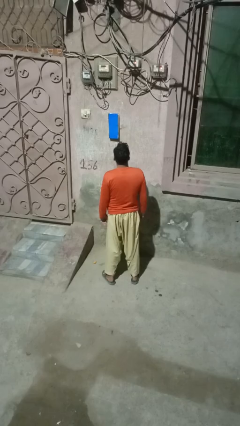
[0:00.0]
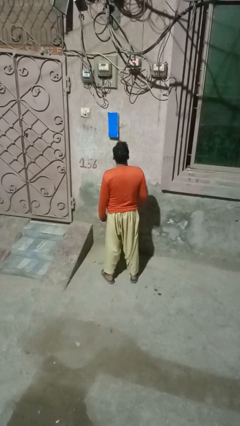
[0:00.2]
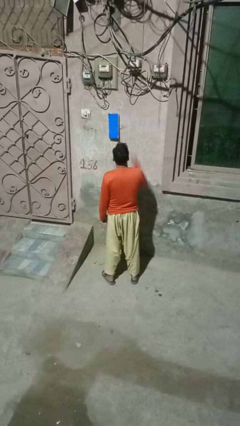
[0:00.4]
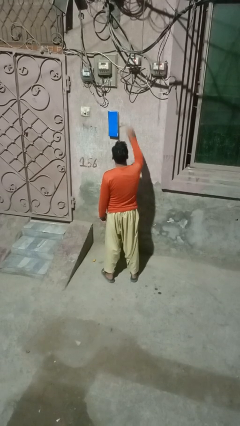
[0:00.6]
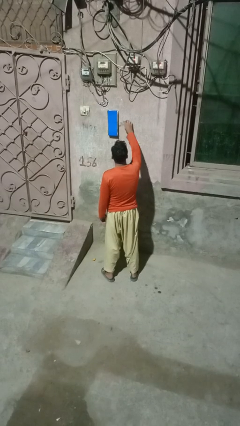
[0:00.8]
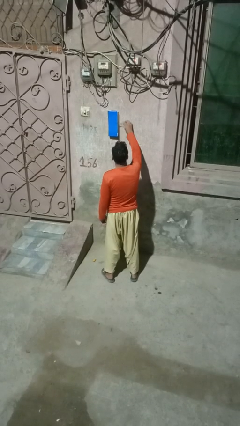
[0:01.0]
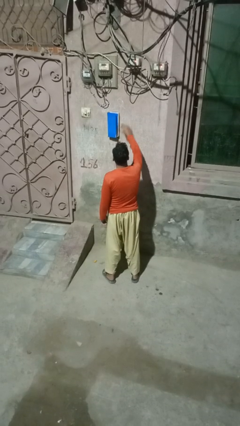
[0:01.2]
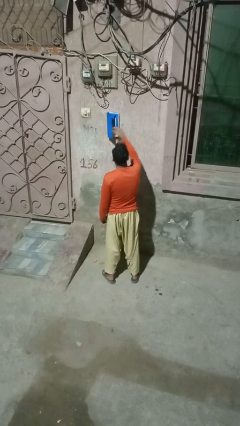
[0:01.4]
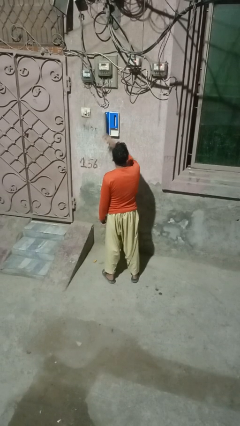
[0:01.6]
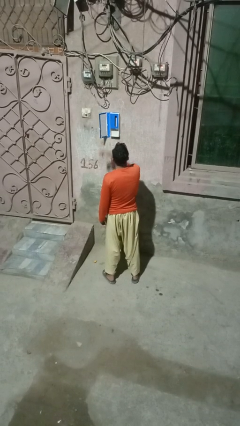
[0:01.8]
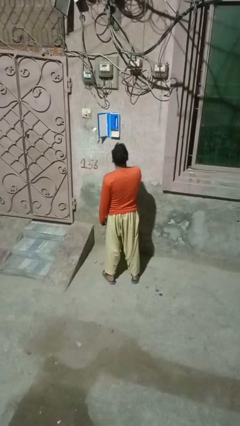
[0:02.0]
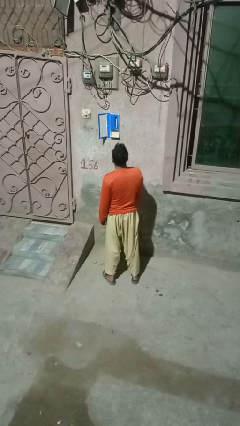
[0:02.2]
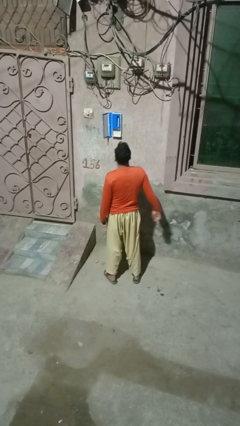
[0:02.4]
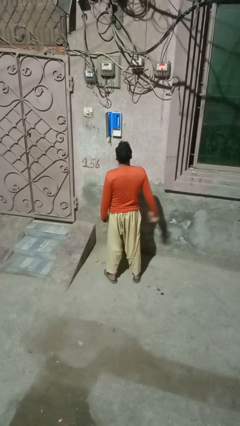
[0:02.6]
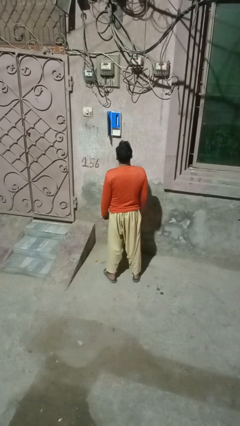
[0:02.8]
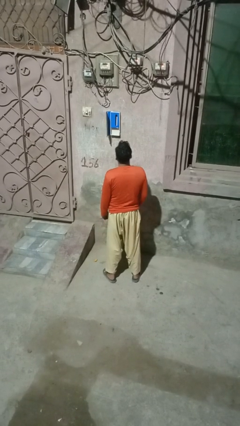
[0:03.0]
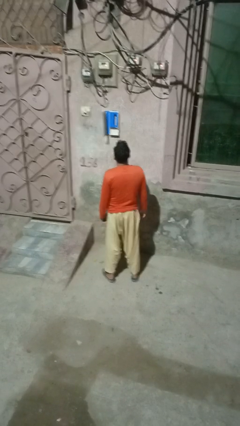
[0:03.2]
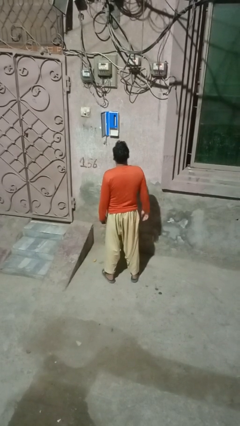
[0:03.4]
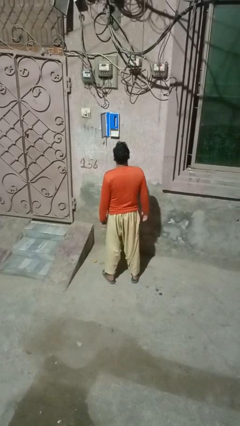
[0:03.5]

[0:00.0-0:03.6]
person opens mailbox

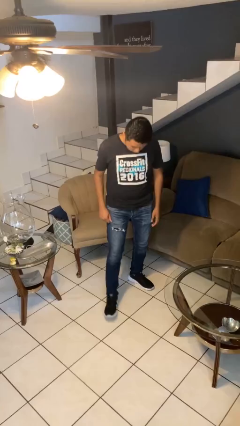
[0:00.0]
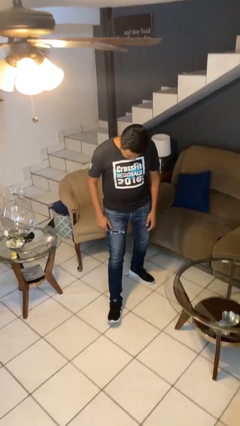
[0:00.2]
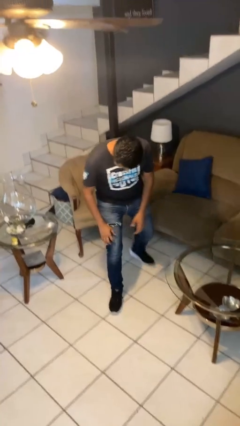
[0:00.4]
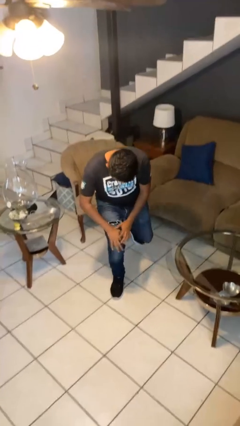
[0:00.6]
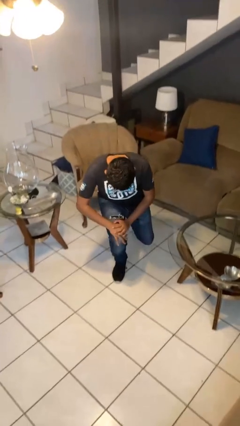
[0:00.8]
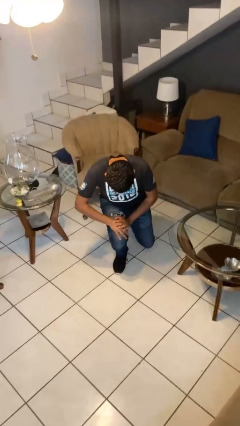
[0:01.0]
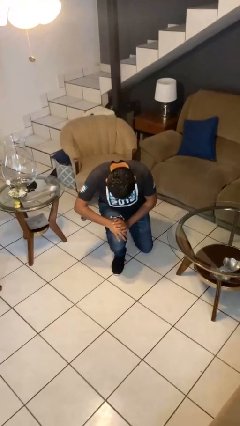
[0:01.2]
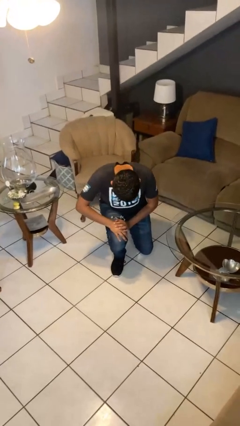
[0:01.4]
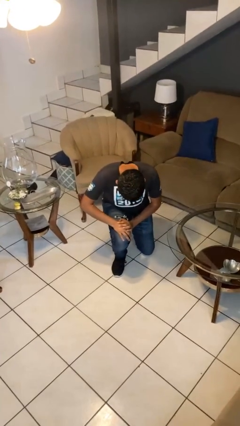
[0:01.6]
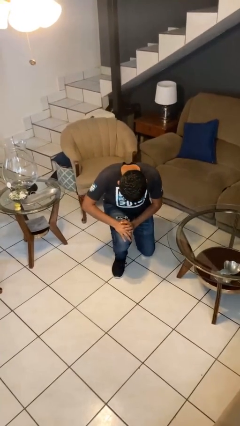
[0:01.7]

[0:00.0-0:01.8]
person kneels

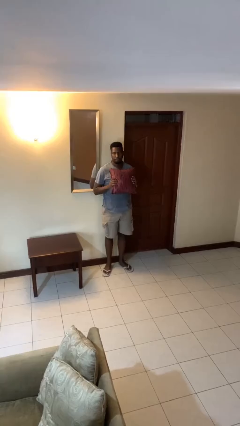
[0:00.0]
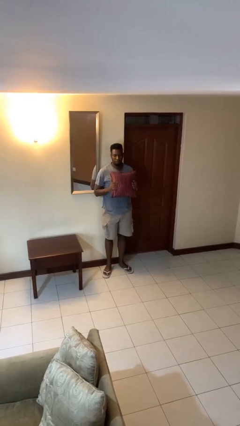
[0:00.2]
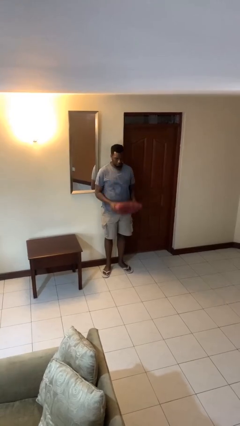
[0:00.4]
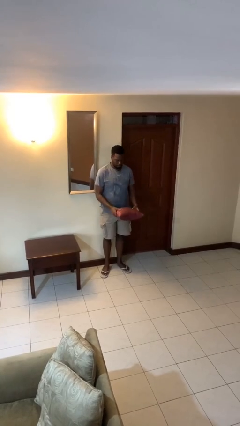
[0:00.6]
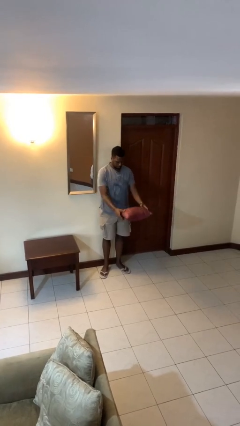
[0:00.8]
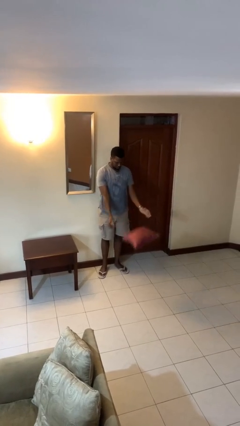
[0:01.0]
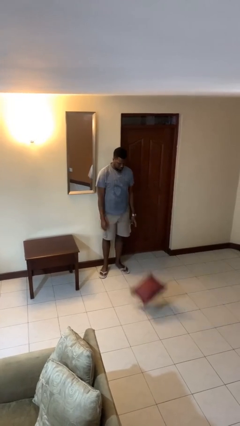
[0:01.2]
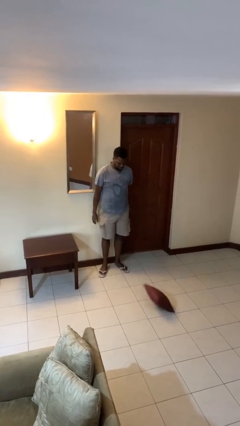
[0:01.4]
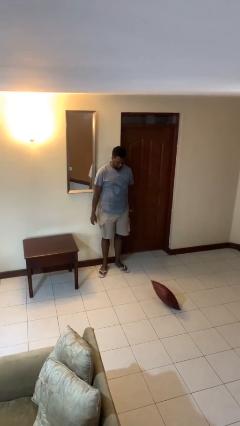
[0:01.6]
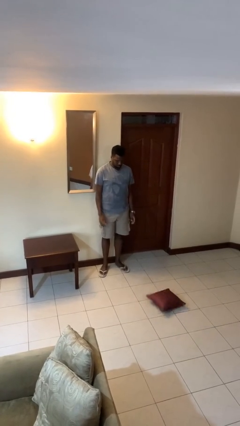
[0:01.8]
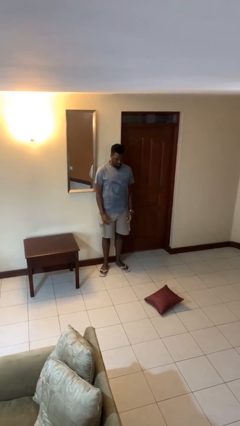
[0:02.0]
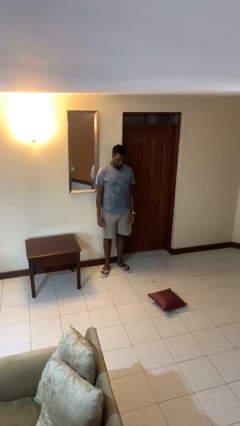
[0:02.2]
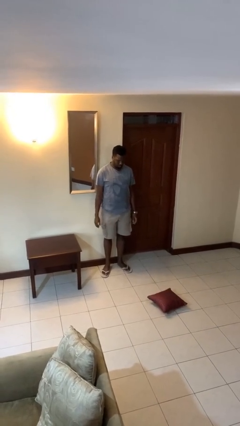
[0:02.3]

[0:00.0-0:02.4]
person throws object to ground

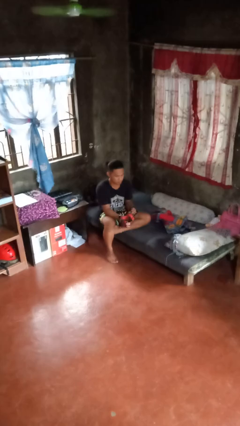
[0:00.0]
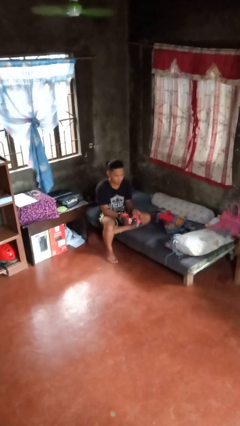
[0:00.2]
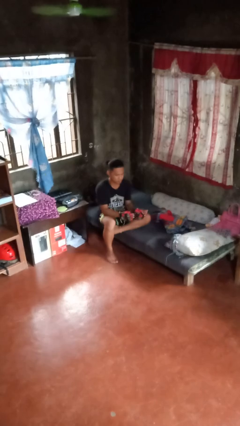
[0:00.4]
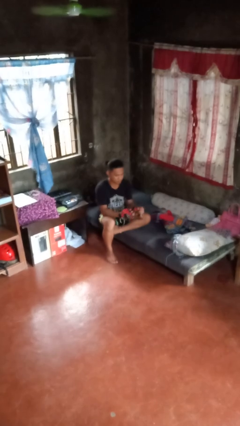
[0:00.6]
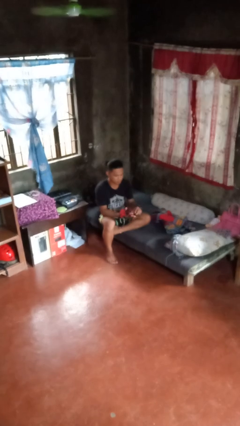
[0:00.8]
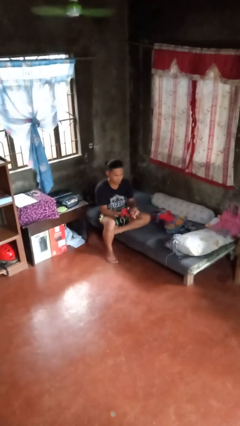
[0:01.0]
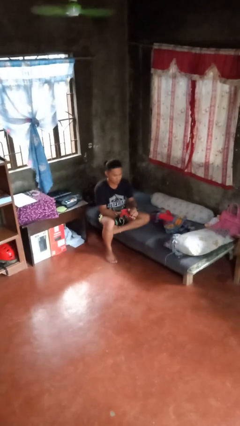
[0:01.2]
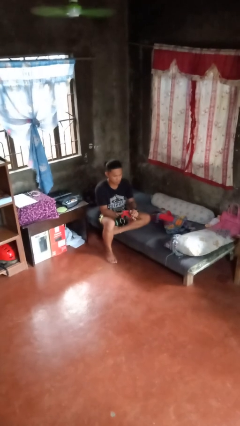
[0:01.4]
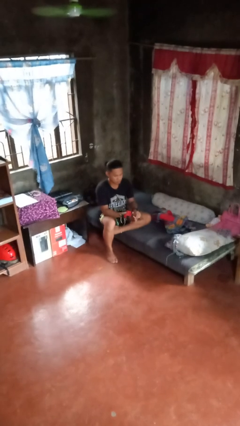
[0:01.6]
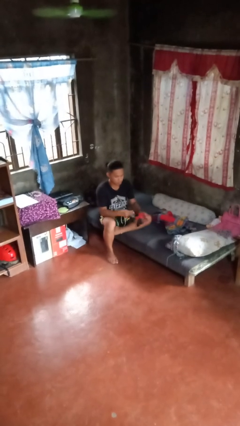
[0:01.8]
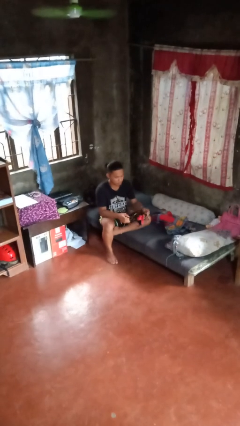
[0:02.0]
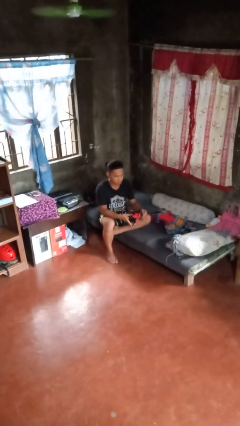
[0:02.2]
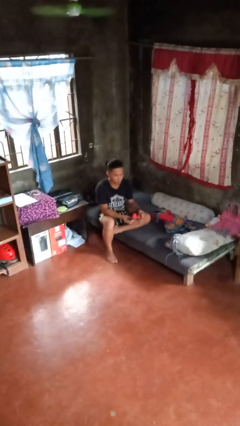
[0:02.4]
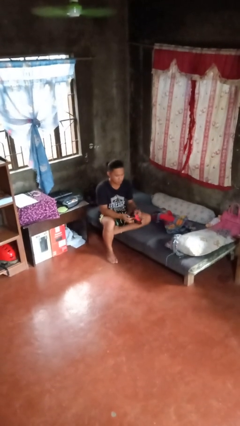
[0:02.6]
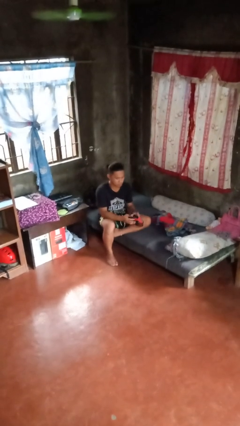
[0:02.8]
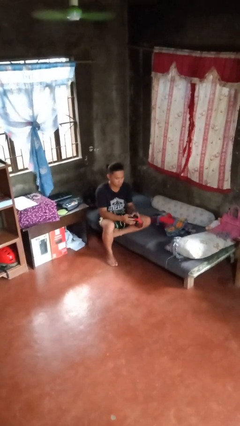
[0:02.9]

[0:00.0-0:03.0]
person takes off gloves

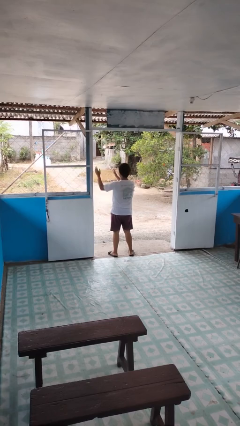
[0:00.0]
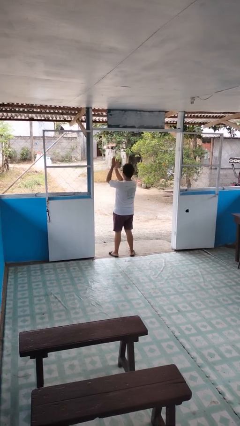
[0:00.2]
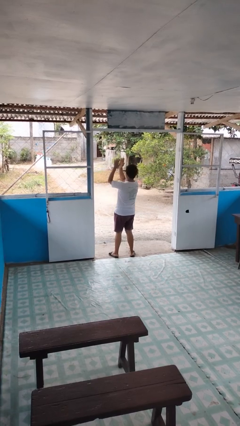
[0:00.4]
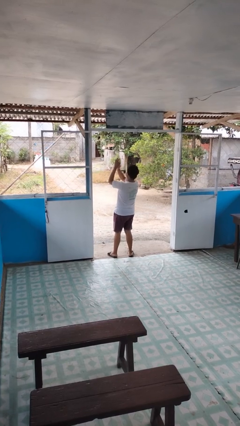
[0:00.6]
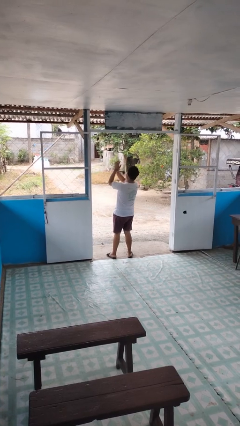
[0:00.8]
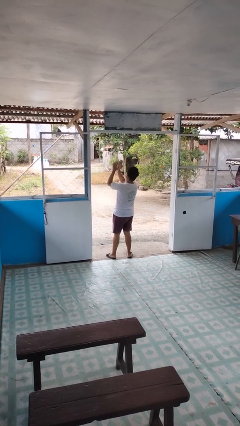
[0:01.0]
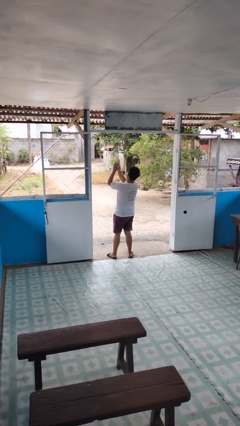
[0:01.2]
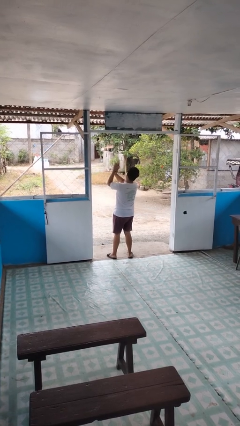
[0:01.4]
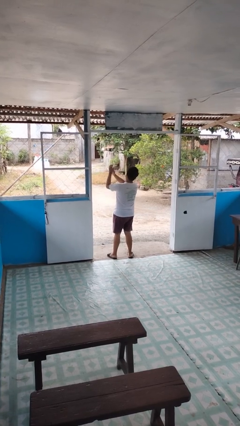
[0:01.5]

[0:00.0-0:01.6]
person claps hands

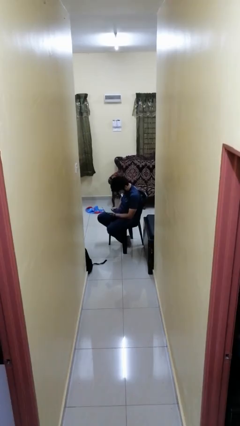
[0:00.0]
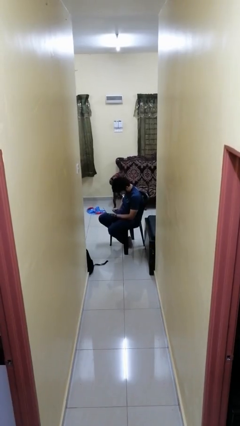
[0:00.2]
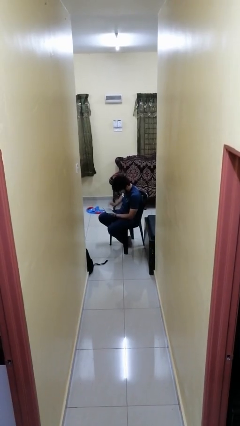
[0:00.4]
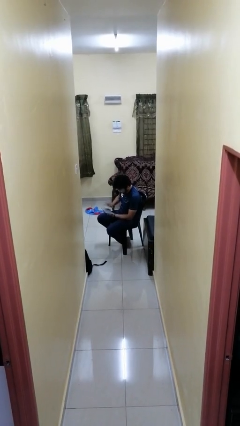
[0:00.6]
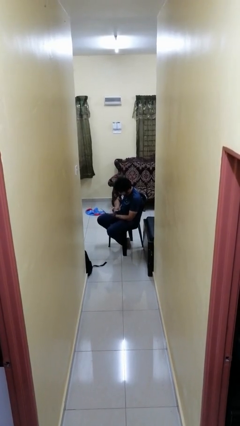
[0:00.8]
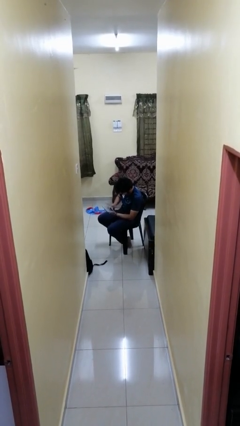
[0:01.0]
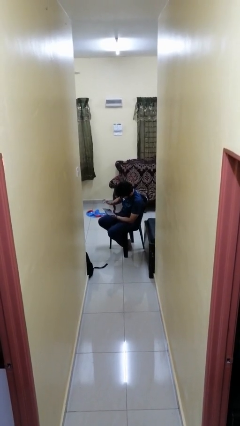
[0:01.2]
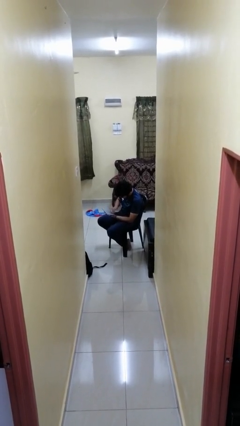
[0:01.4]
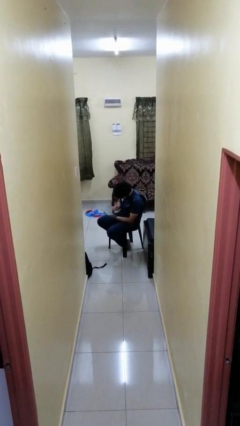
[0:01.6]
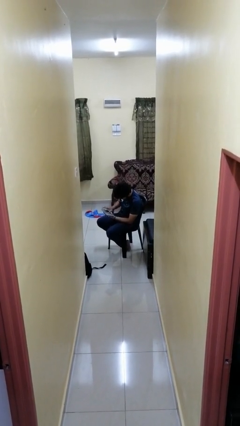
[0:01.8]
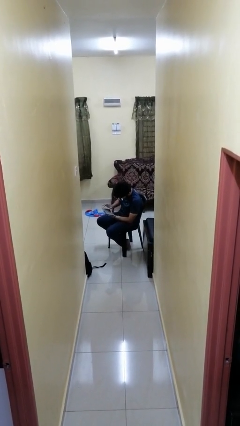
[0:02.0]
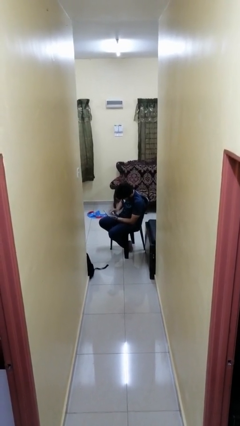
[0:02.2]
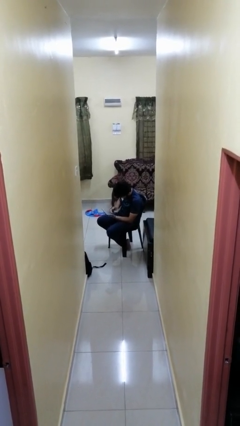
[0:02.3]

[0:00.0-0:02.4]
person interacts with tablet

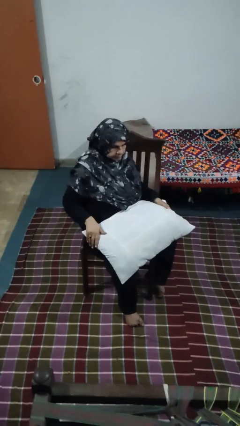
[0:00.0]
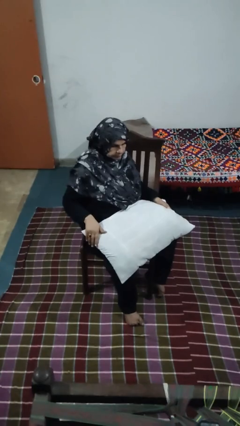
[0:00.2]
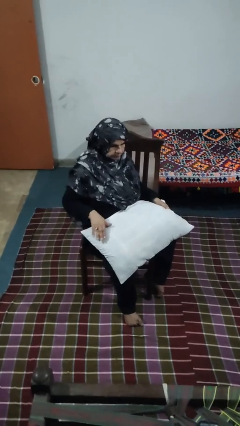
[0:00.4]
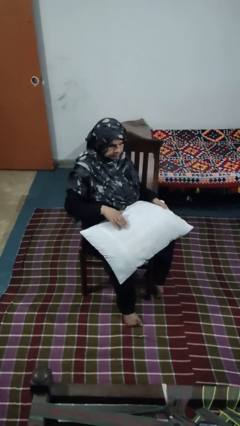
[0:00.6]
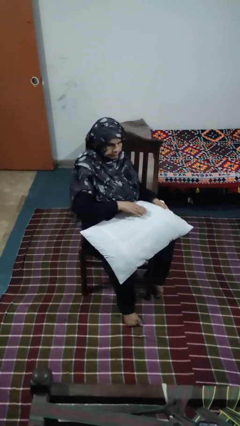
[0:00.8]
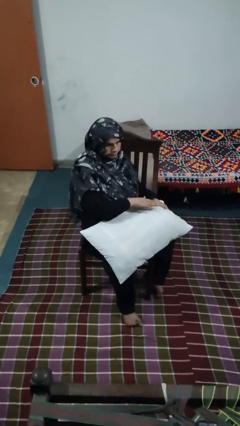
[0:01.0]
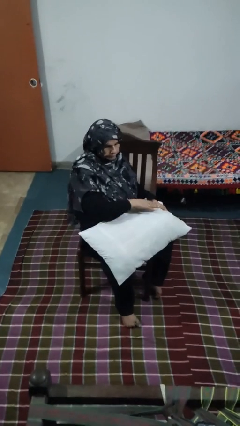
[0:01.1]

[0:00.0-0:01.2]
person waves hand over object

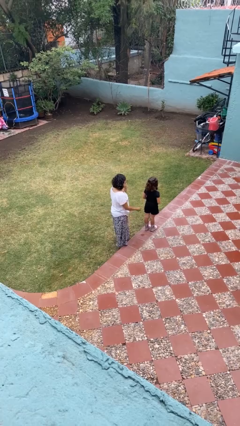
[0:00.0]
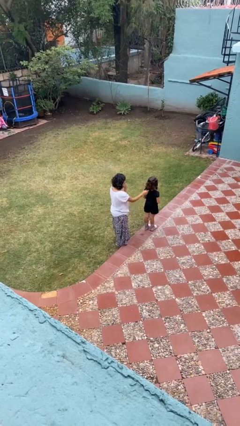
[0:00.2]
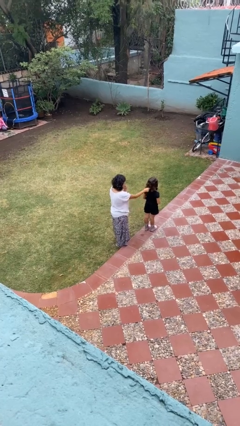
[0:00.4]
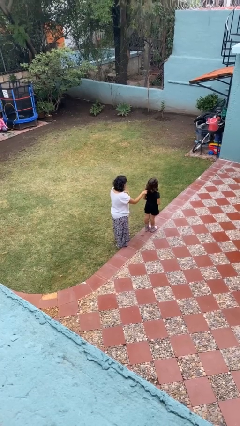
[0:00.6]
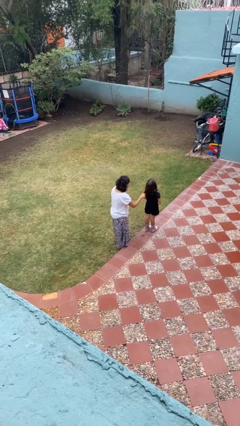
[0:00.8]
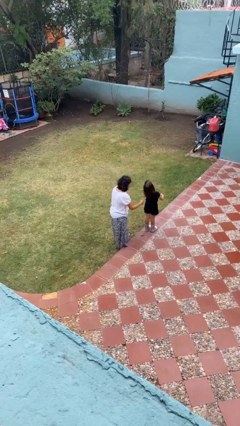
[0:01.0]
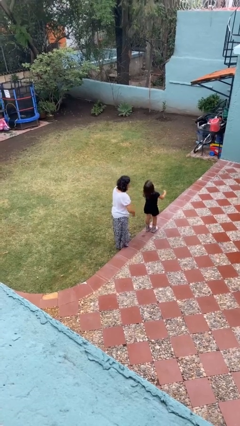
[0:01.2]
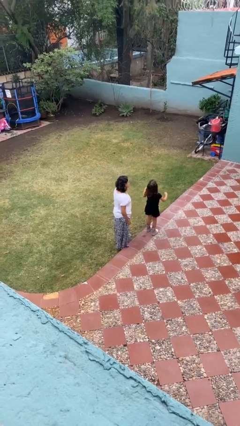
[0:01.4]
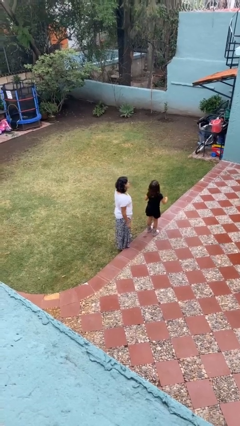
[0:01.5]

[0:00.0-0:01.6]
person grabs person by hair
